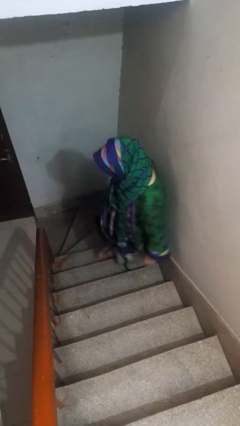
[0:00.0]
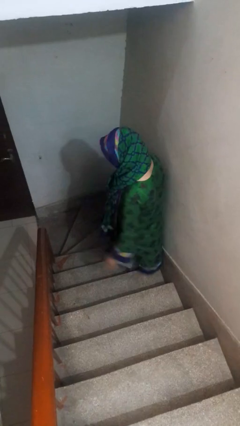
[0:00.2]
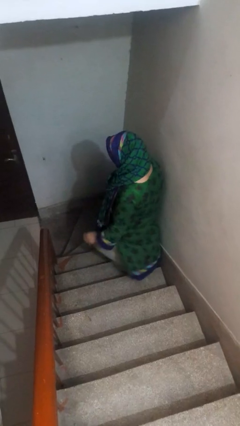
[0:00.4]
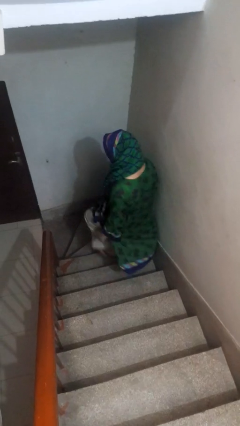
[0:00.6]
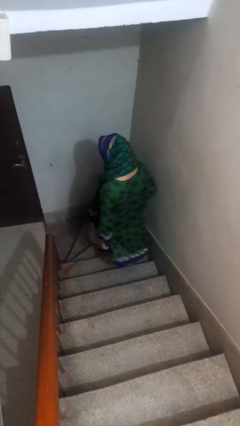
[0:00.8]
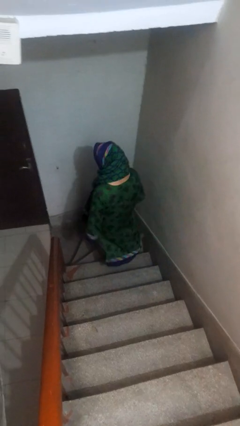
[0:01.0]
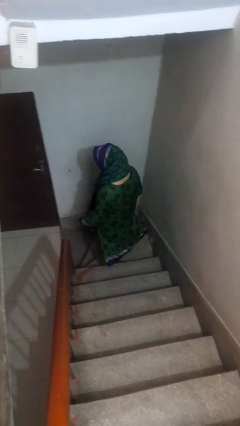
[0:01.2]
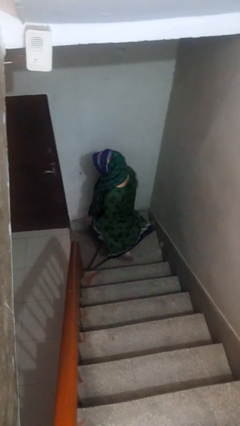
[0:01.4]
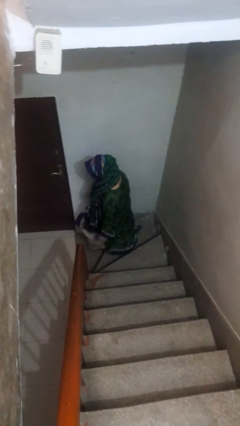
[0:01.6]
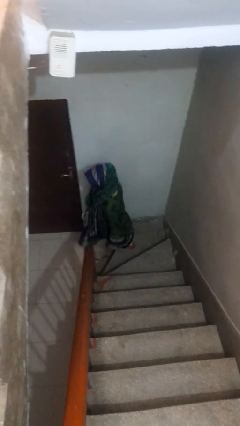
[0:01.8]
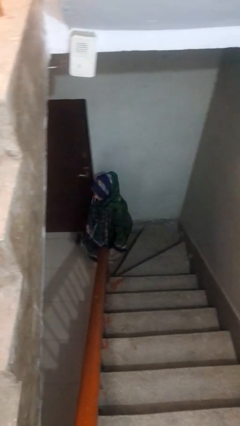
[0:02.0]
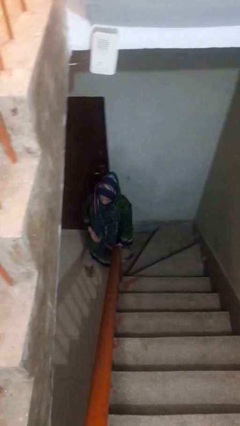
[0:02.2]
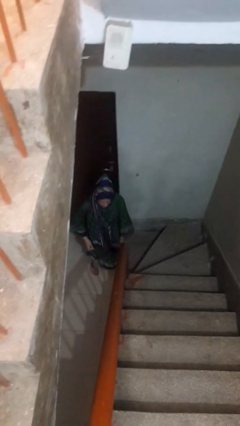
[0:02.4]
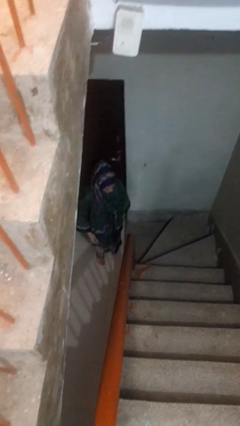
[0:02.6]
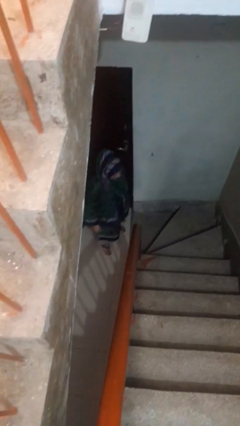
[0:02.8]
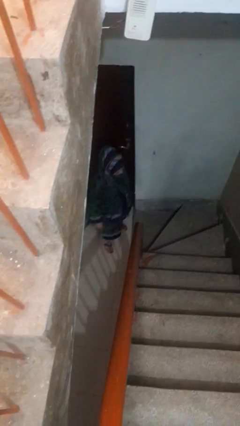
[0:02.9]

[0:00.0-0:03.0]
person climbs down stairs
